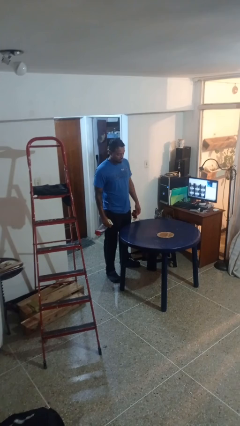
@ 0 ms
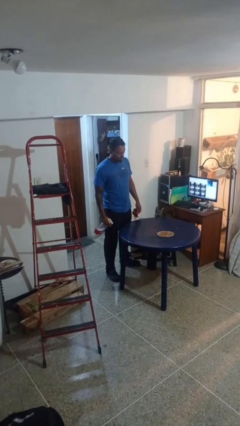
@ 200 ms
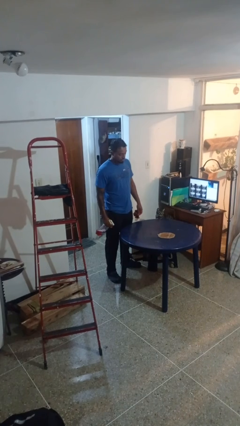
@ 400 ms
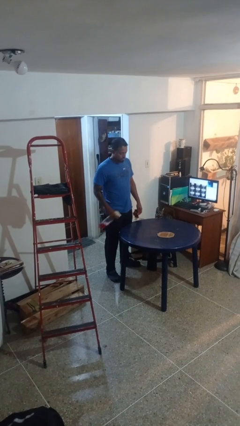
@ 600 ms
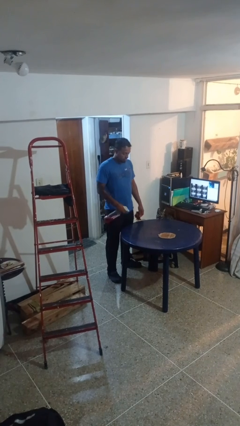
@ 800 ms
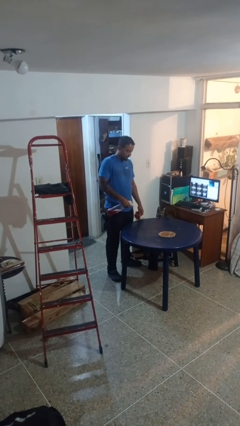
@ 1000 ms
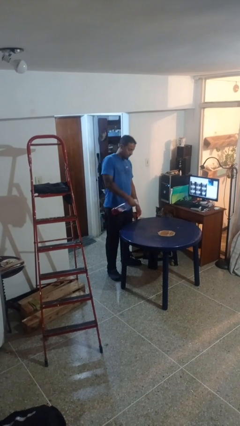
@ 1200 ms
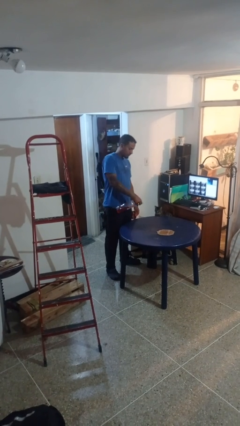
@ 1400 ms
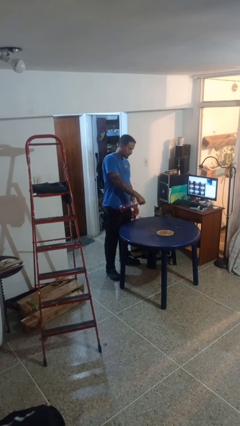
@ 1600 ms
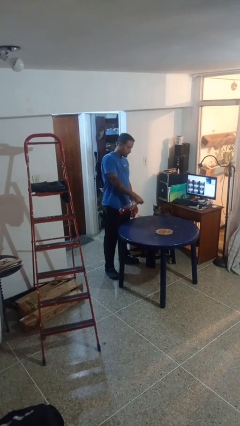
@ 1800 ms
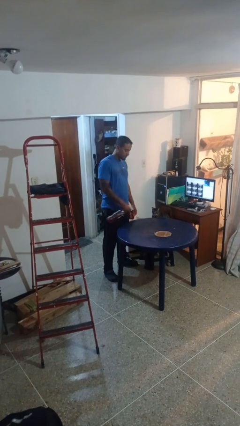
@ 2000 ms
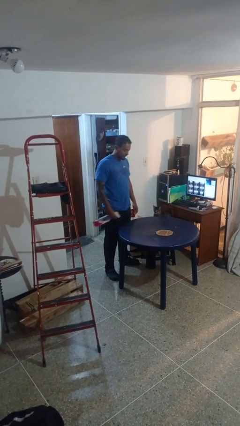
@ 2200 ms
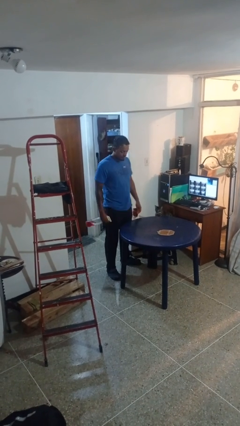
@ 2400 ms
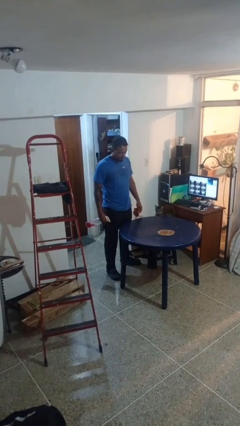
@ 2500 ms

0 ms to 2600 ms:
person sprays from bottle

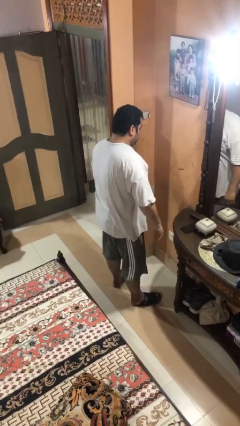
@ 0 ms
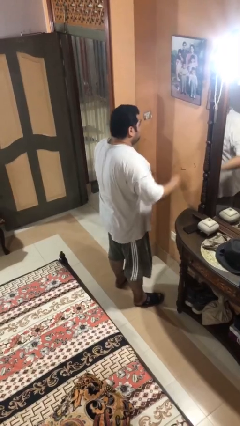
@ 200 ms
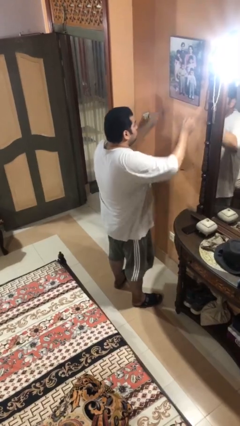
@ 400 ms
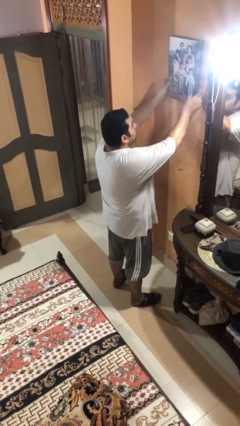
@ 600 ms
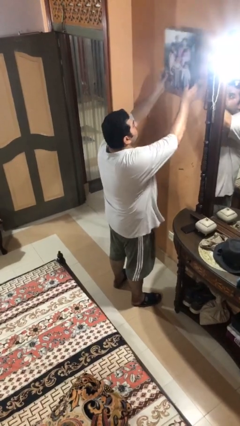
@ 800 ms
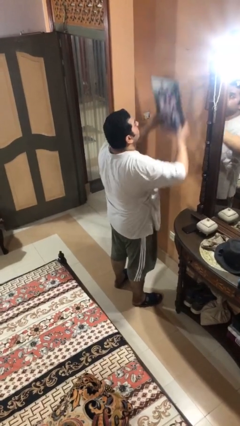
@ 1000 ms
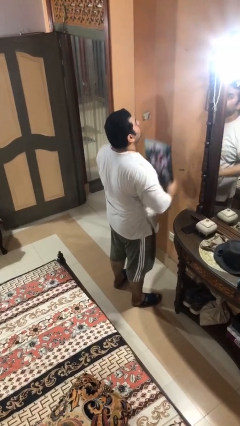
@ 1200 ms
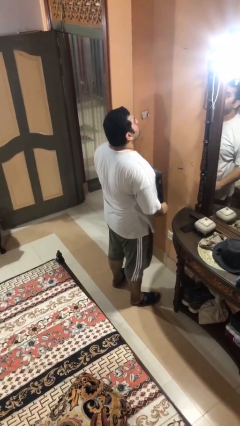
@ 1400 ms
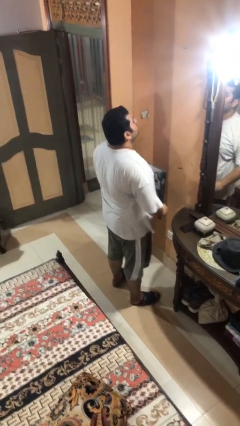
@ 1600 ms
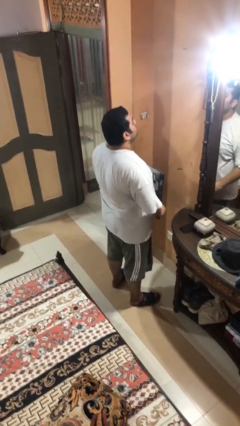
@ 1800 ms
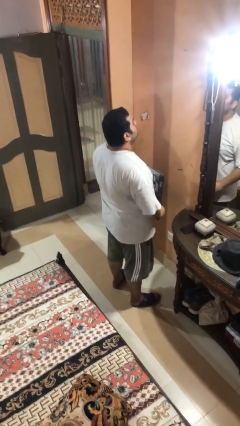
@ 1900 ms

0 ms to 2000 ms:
person takes down picture frame

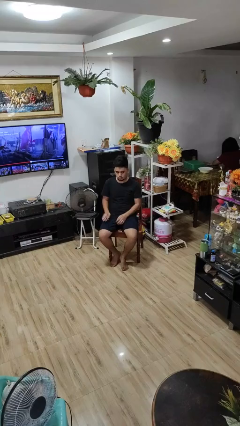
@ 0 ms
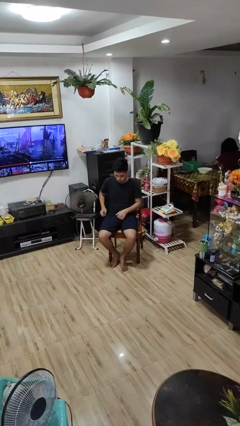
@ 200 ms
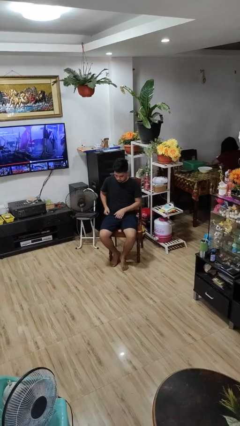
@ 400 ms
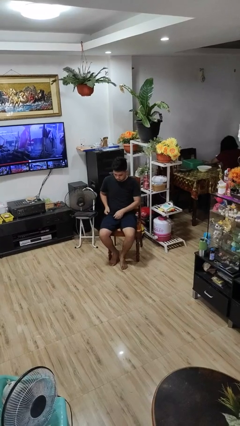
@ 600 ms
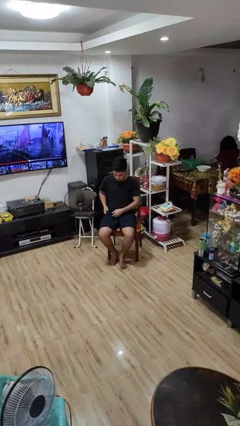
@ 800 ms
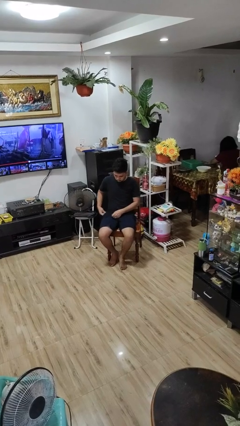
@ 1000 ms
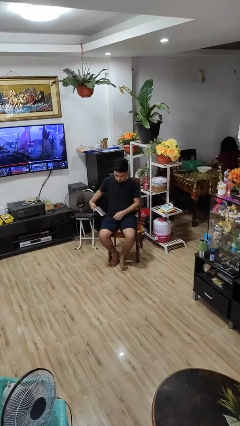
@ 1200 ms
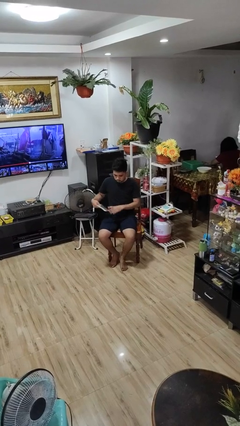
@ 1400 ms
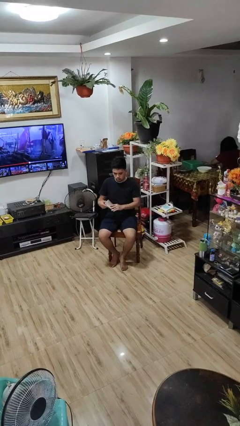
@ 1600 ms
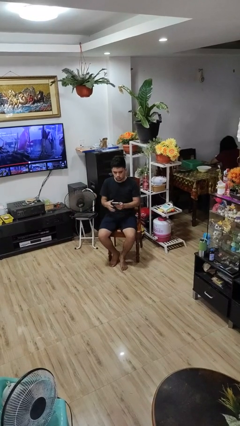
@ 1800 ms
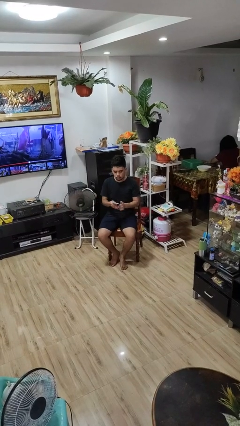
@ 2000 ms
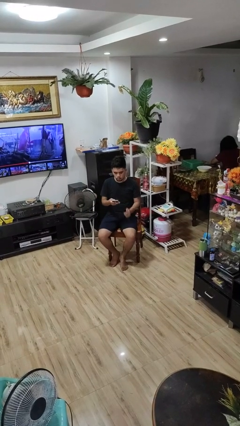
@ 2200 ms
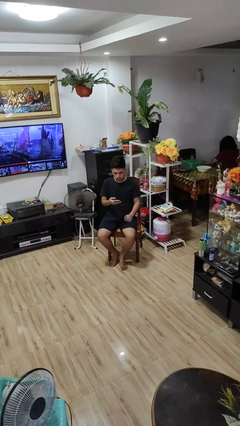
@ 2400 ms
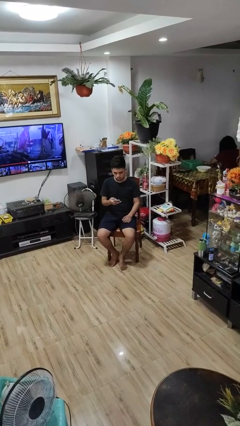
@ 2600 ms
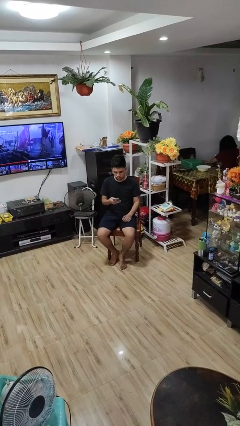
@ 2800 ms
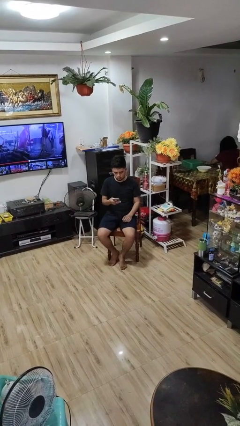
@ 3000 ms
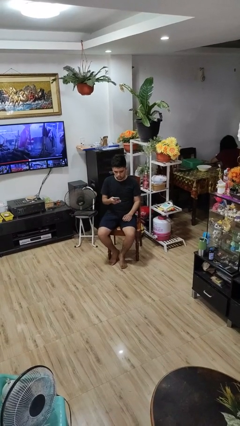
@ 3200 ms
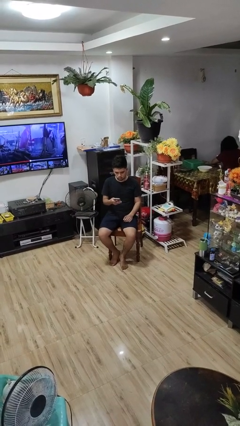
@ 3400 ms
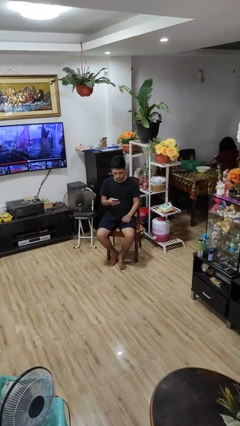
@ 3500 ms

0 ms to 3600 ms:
person takes phone from pocket

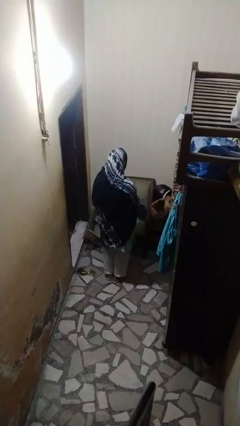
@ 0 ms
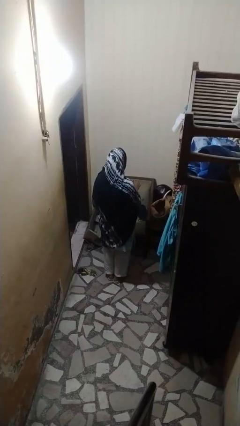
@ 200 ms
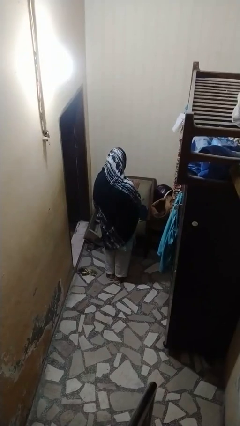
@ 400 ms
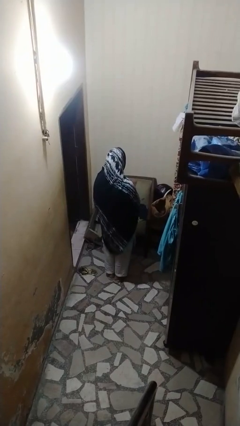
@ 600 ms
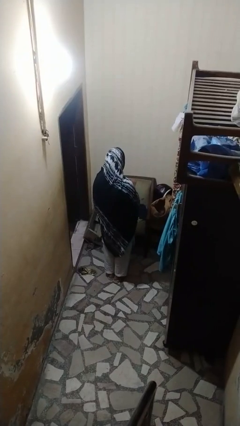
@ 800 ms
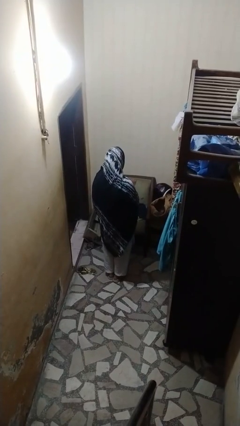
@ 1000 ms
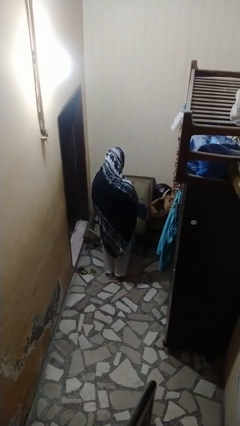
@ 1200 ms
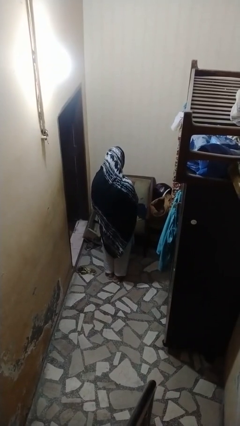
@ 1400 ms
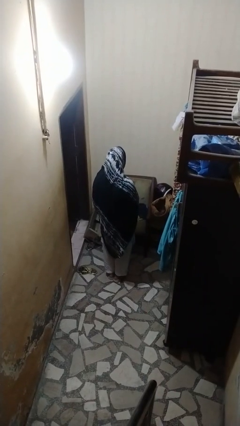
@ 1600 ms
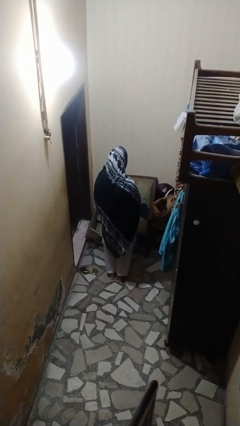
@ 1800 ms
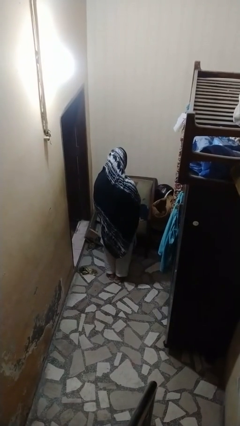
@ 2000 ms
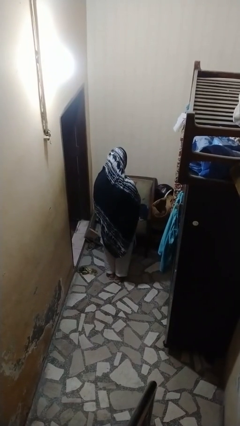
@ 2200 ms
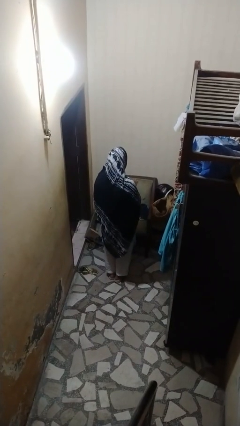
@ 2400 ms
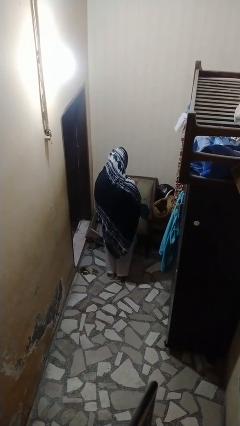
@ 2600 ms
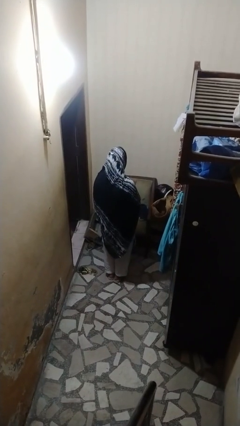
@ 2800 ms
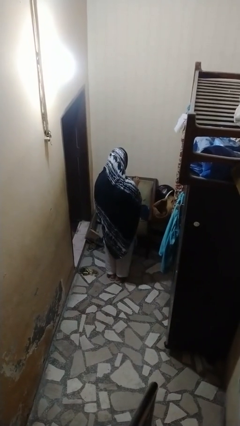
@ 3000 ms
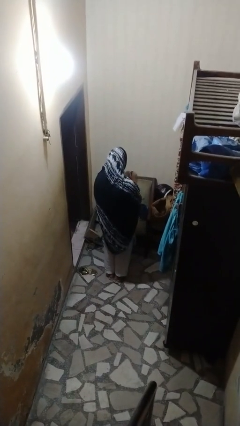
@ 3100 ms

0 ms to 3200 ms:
person stirs mug

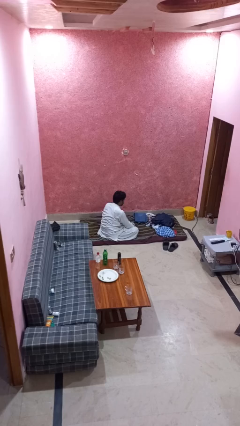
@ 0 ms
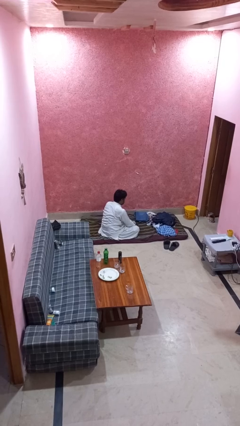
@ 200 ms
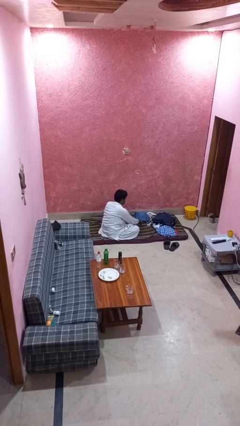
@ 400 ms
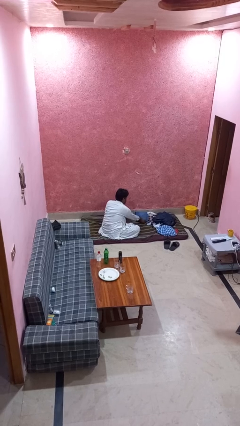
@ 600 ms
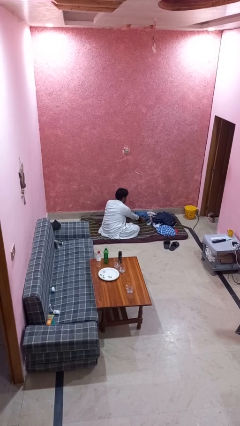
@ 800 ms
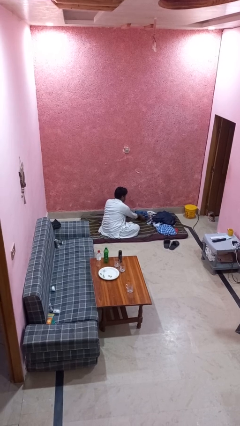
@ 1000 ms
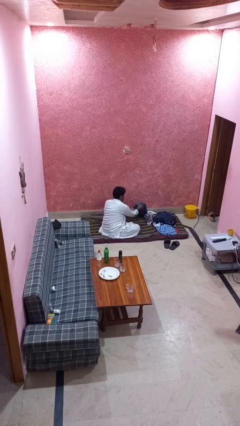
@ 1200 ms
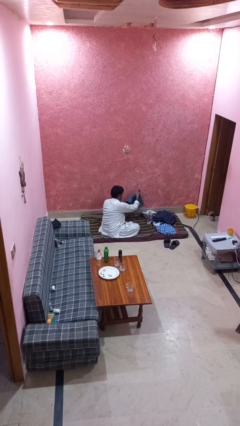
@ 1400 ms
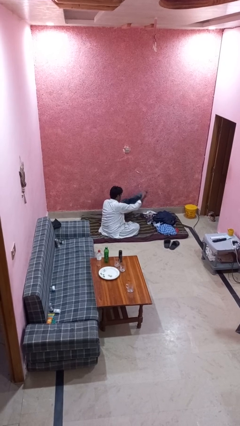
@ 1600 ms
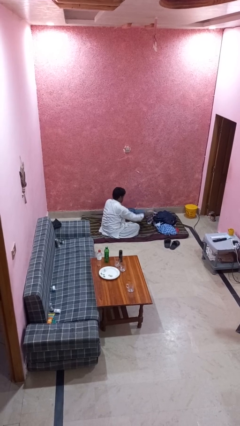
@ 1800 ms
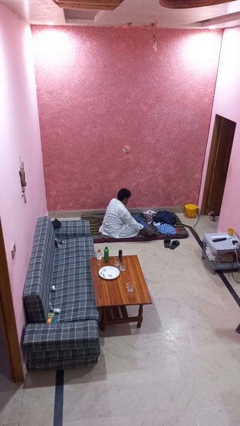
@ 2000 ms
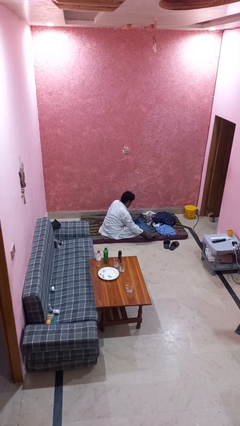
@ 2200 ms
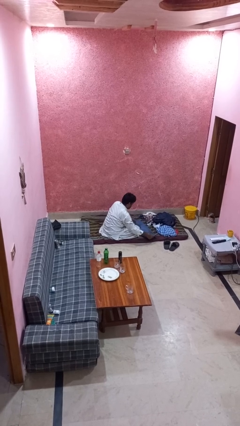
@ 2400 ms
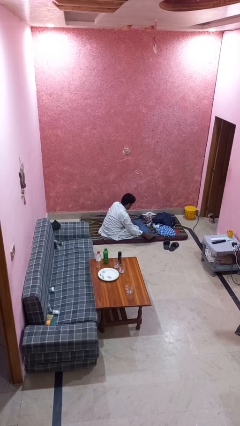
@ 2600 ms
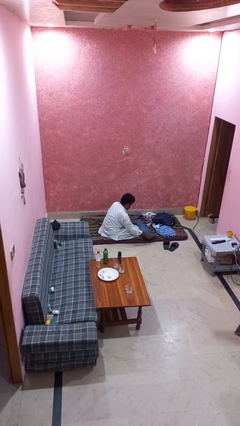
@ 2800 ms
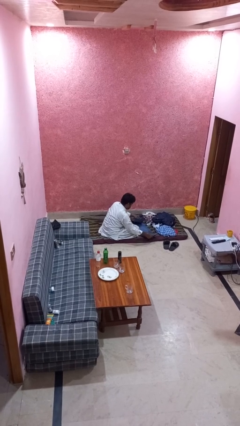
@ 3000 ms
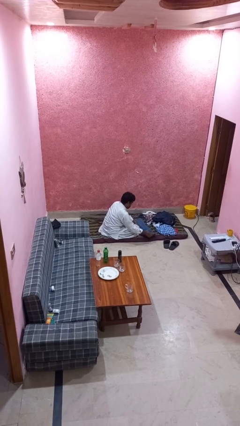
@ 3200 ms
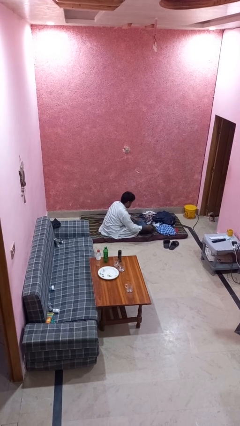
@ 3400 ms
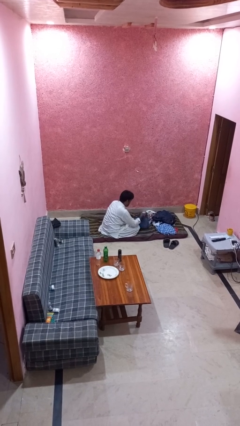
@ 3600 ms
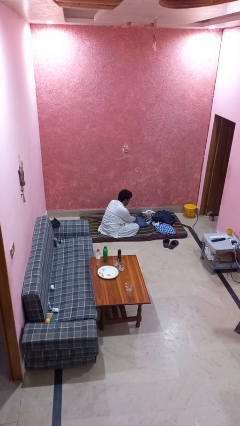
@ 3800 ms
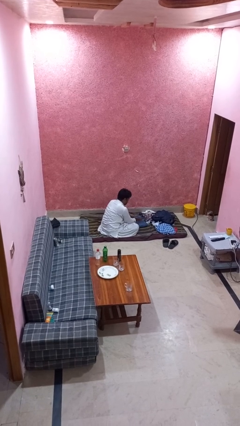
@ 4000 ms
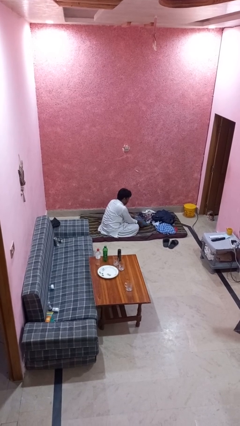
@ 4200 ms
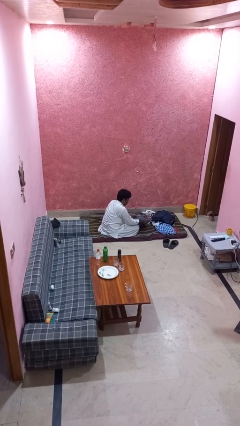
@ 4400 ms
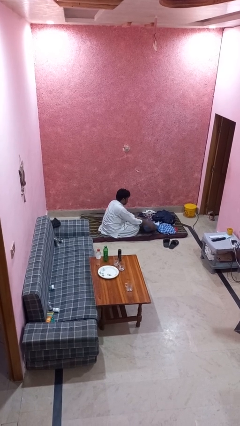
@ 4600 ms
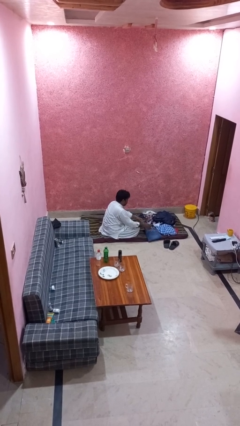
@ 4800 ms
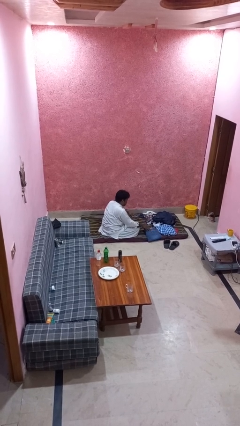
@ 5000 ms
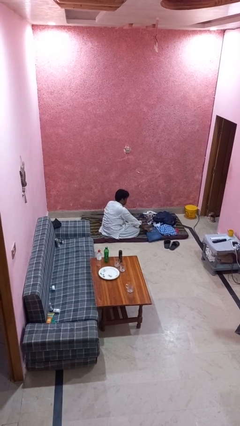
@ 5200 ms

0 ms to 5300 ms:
person folds pants

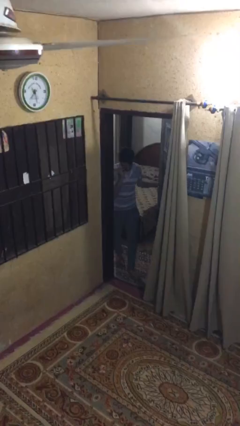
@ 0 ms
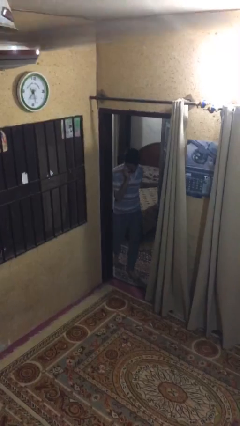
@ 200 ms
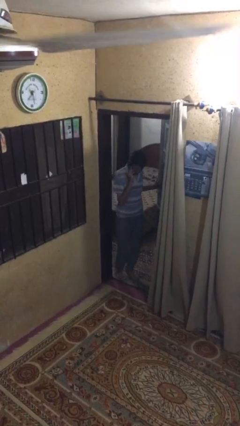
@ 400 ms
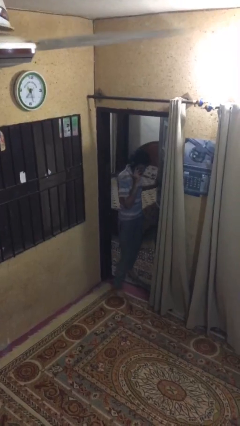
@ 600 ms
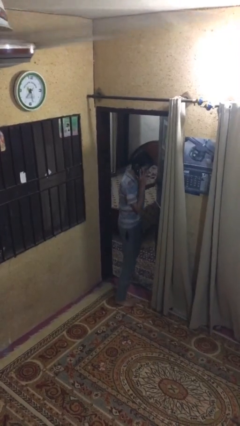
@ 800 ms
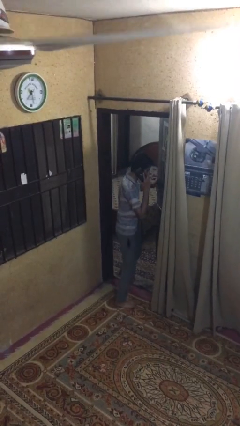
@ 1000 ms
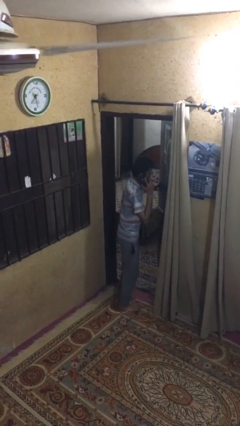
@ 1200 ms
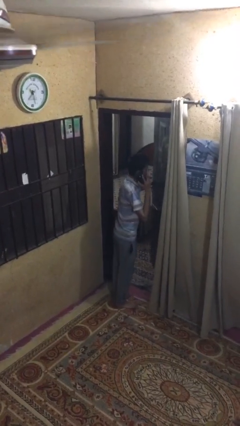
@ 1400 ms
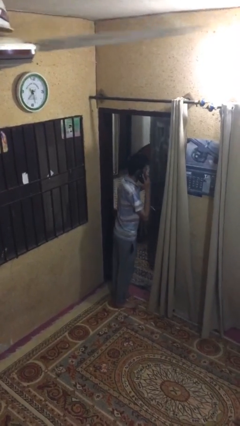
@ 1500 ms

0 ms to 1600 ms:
person enters scene through structure
